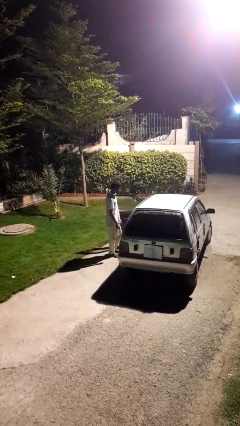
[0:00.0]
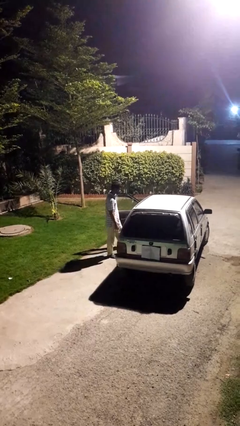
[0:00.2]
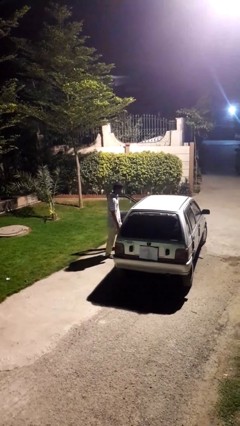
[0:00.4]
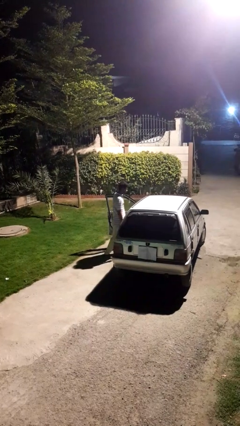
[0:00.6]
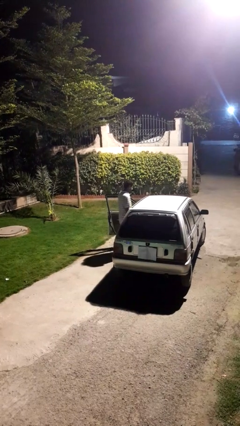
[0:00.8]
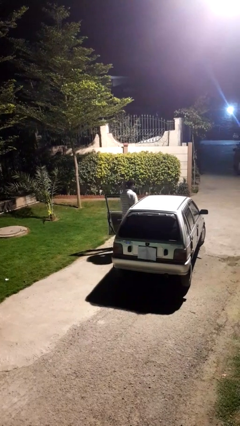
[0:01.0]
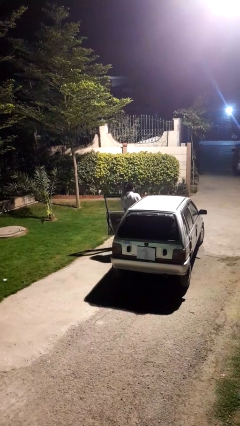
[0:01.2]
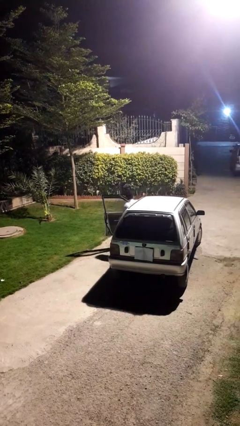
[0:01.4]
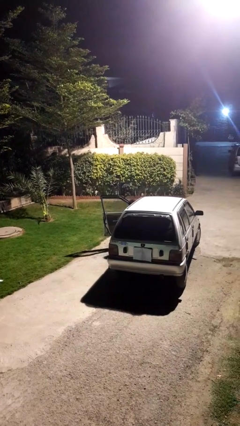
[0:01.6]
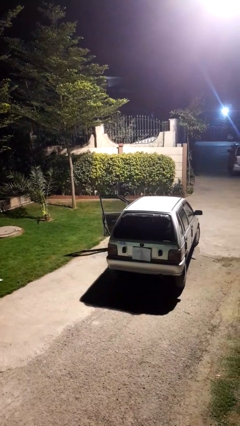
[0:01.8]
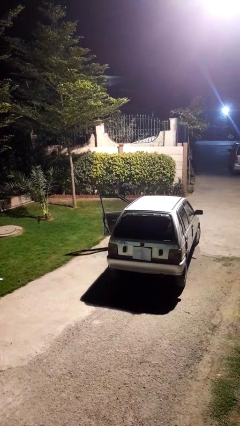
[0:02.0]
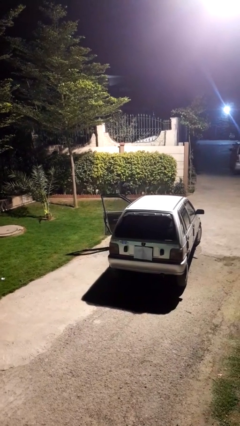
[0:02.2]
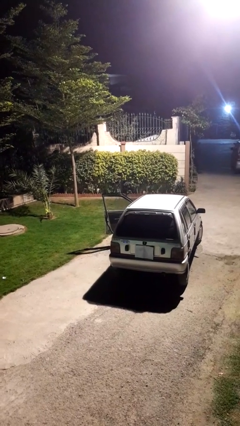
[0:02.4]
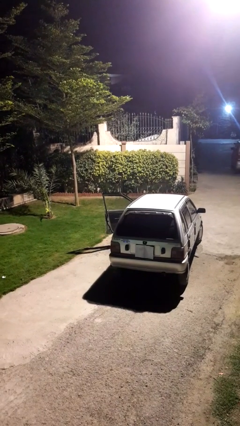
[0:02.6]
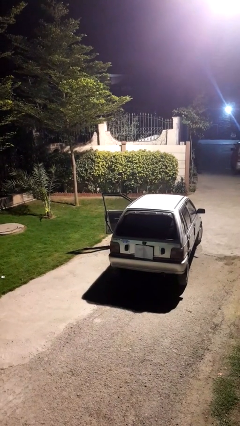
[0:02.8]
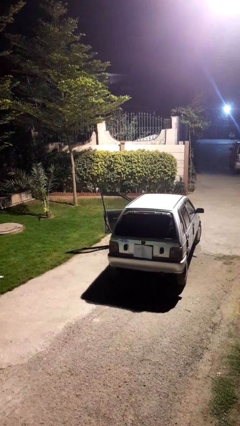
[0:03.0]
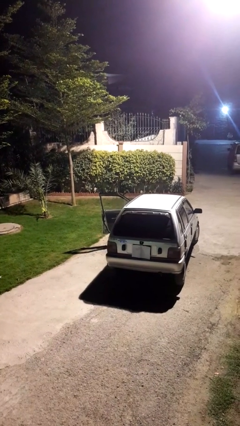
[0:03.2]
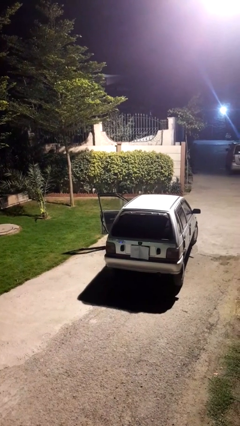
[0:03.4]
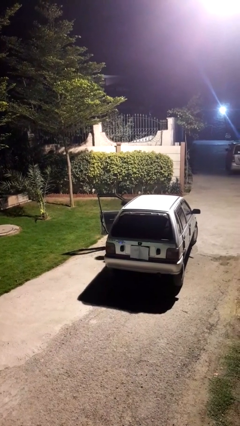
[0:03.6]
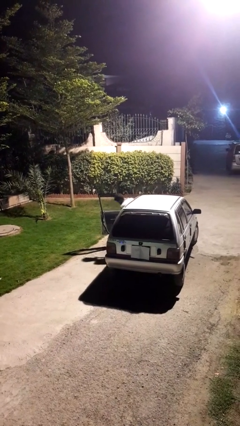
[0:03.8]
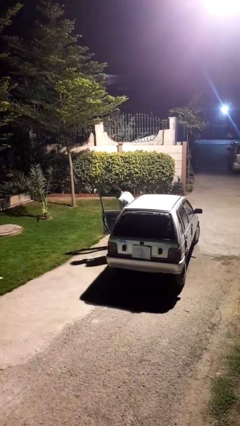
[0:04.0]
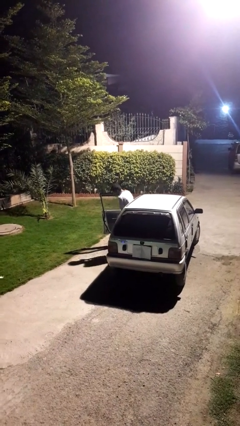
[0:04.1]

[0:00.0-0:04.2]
person enters car

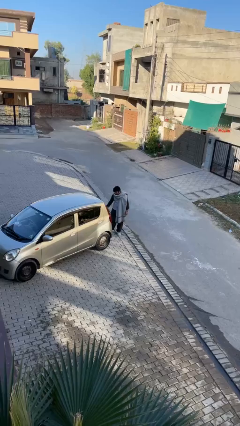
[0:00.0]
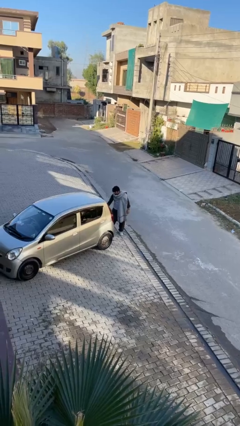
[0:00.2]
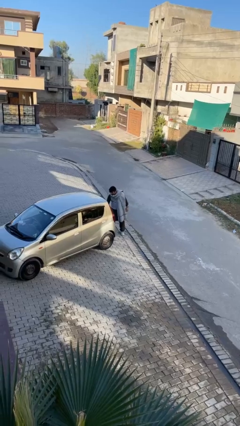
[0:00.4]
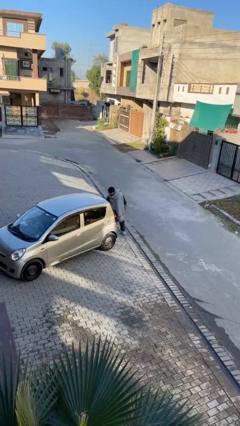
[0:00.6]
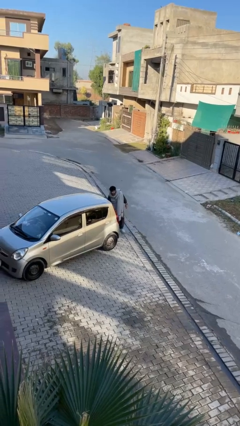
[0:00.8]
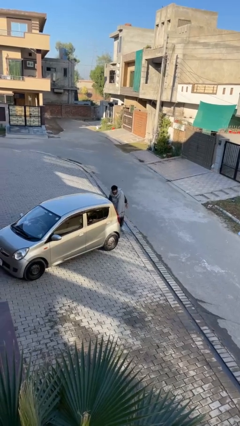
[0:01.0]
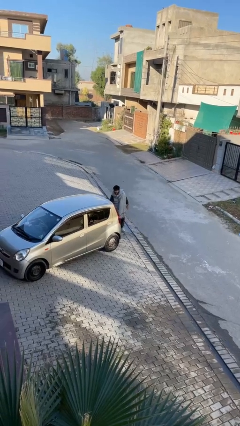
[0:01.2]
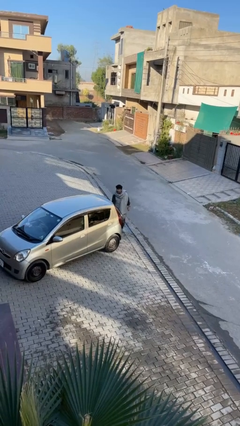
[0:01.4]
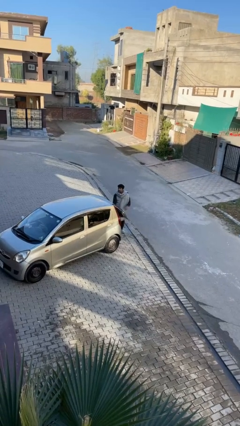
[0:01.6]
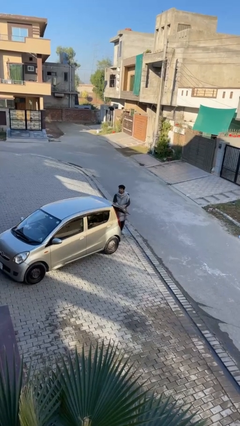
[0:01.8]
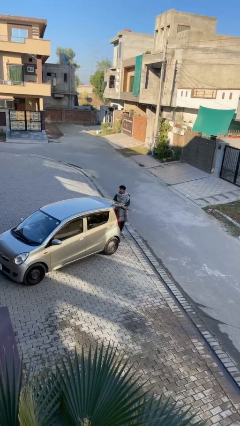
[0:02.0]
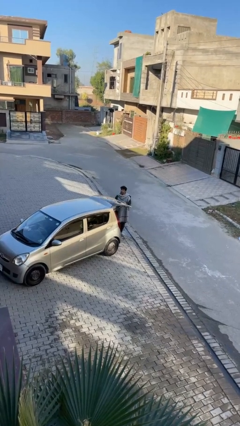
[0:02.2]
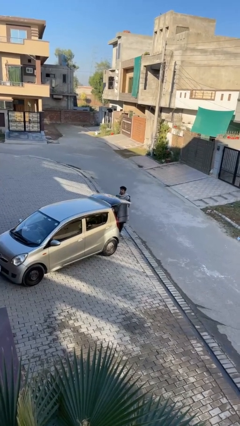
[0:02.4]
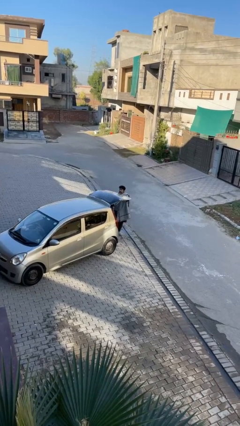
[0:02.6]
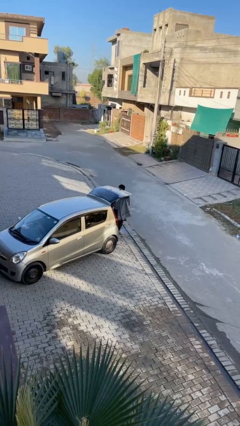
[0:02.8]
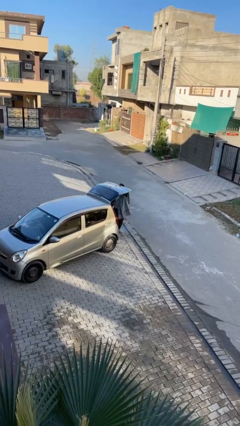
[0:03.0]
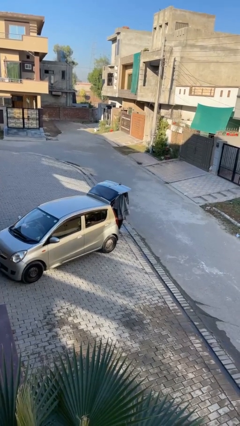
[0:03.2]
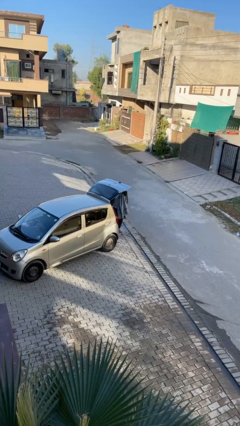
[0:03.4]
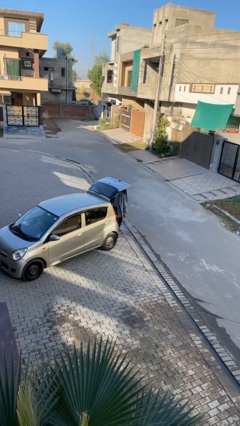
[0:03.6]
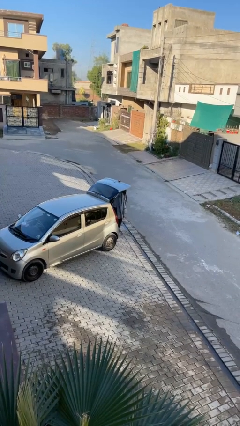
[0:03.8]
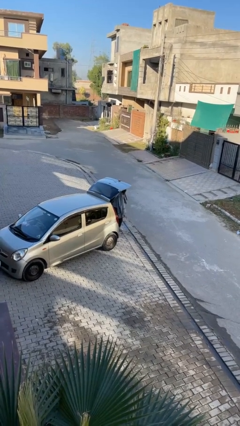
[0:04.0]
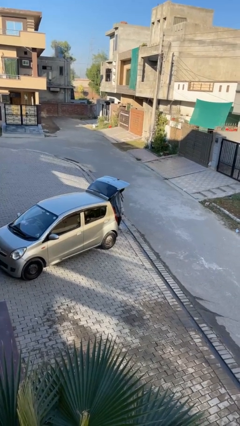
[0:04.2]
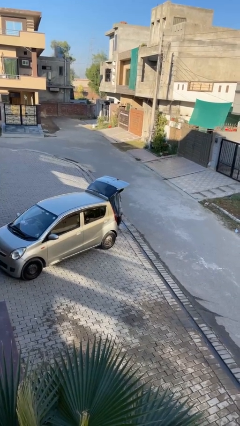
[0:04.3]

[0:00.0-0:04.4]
person opens car trunk

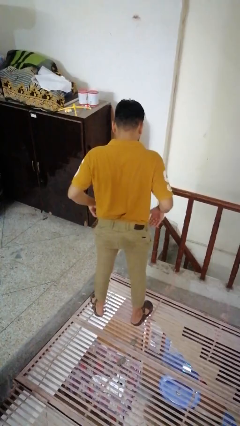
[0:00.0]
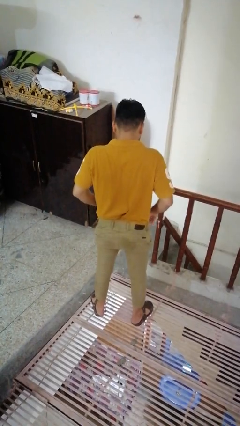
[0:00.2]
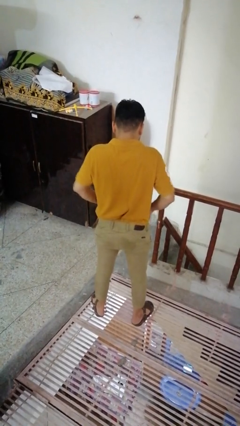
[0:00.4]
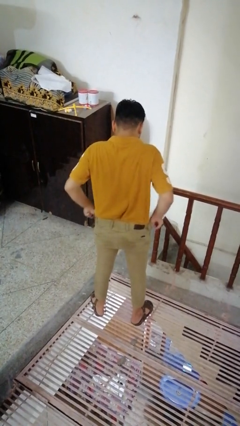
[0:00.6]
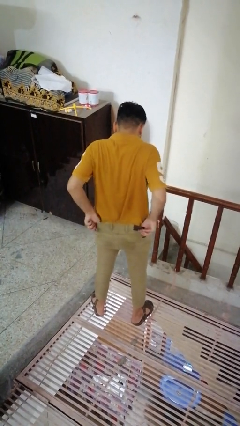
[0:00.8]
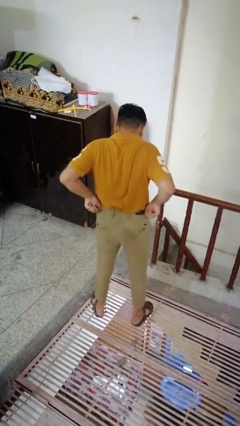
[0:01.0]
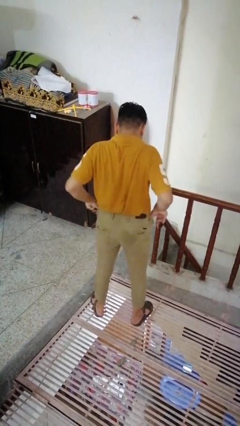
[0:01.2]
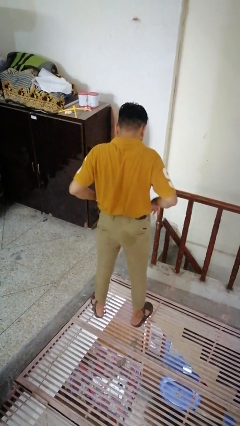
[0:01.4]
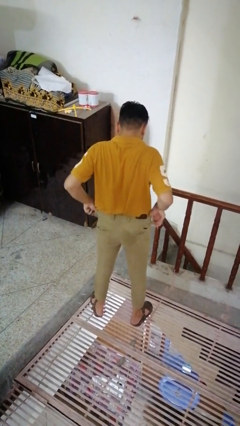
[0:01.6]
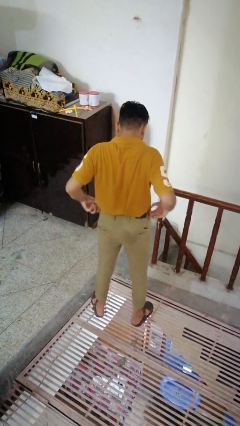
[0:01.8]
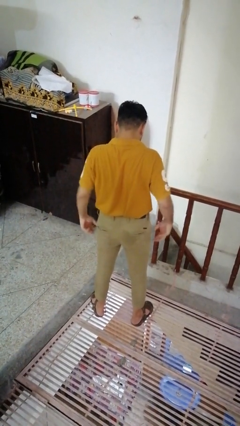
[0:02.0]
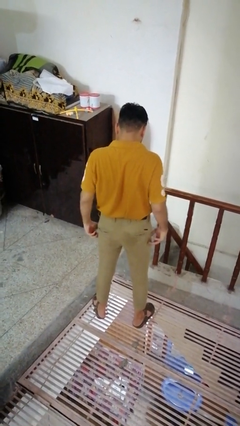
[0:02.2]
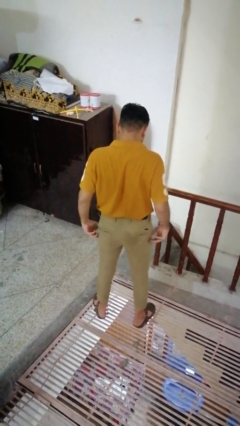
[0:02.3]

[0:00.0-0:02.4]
person hikes up pants

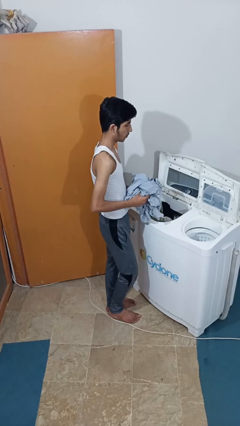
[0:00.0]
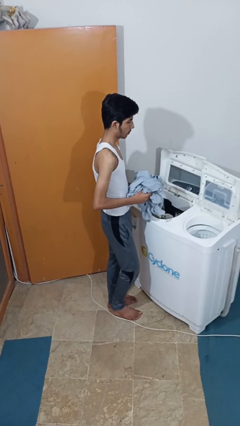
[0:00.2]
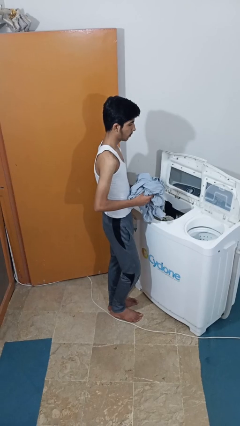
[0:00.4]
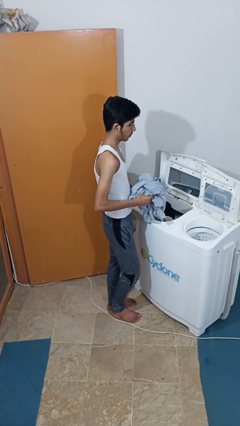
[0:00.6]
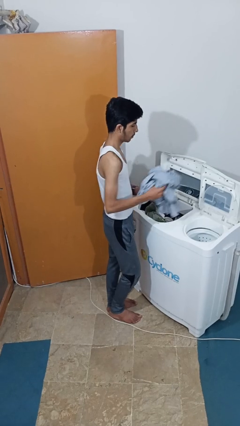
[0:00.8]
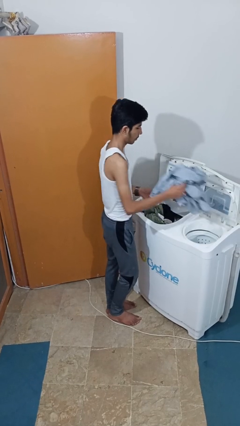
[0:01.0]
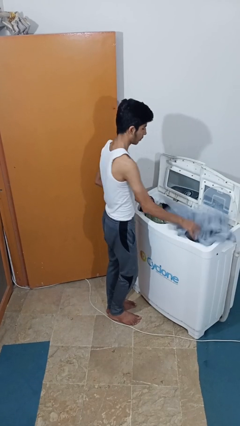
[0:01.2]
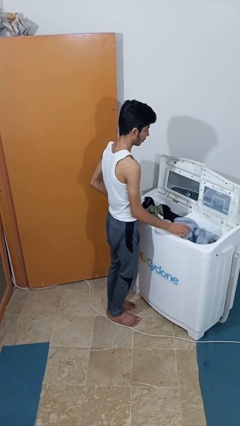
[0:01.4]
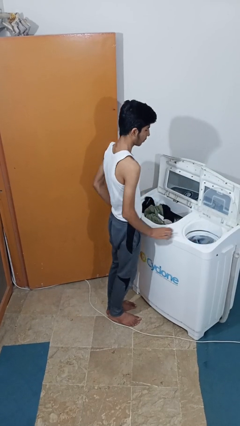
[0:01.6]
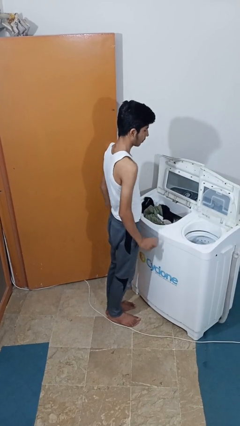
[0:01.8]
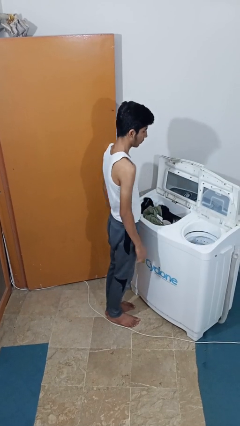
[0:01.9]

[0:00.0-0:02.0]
person loads dryer

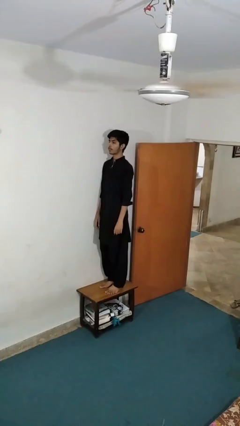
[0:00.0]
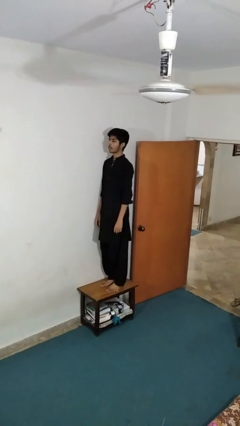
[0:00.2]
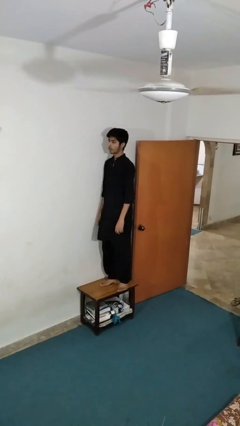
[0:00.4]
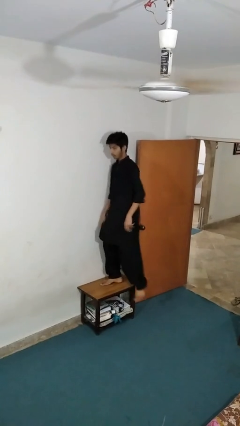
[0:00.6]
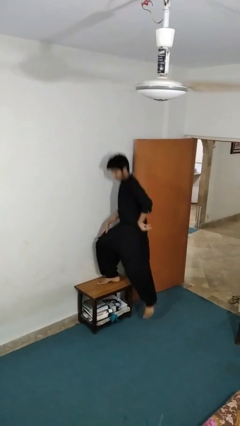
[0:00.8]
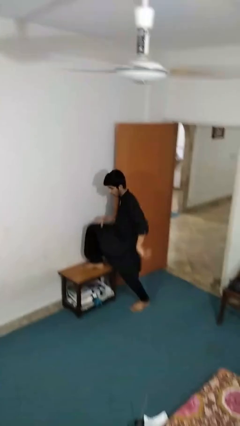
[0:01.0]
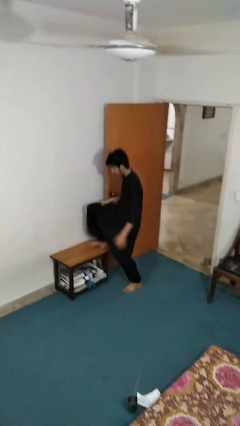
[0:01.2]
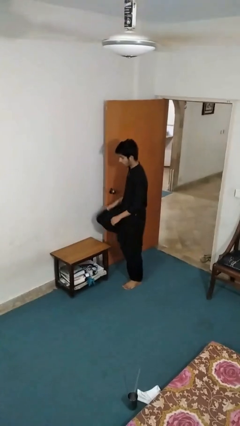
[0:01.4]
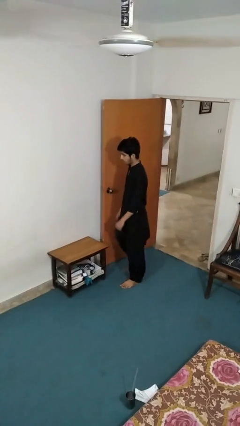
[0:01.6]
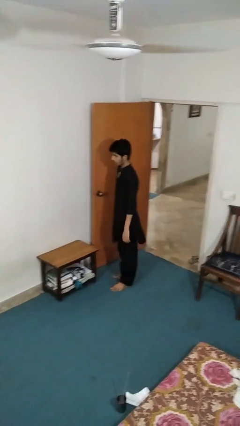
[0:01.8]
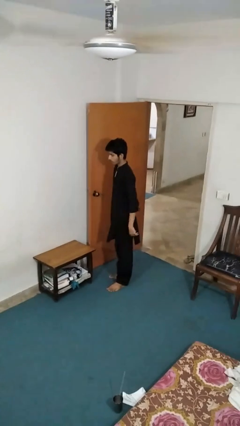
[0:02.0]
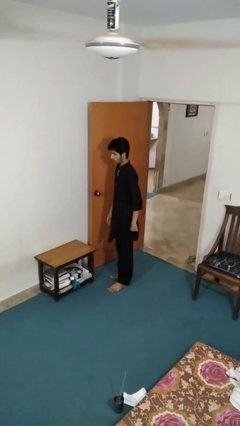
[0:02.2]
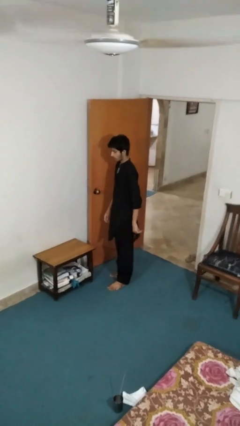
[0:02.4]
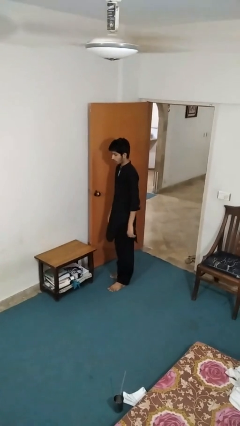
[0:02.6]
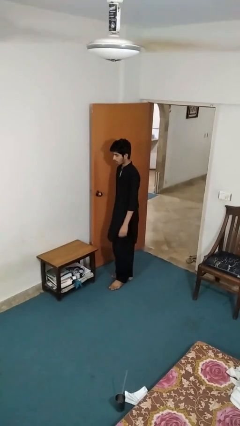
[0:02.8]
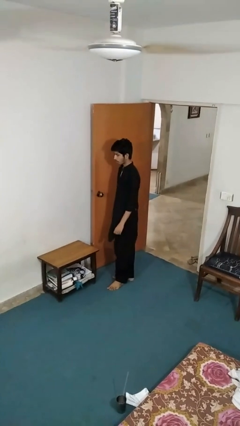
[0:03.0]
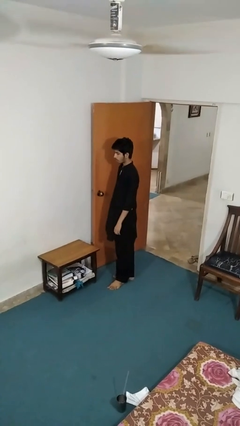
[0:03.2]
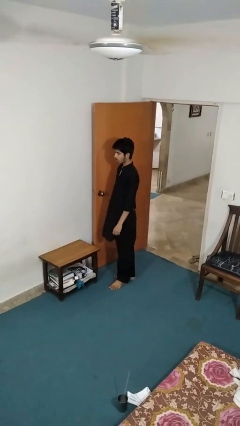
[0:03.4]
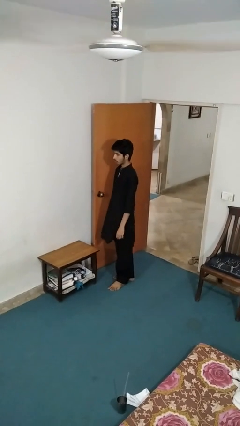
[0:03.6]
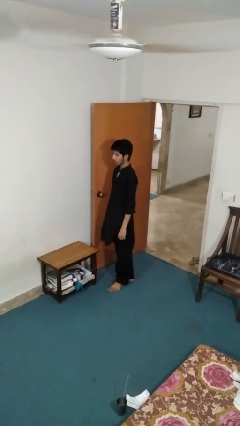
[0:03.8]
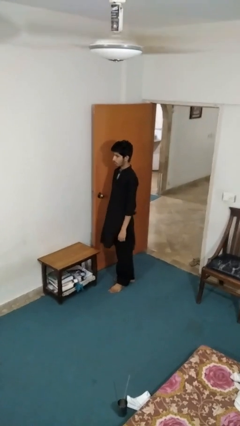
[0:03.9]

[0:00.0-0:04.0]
person climbs off table

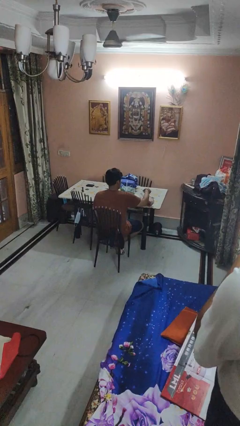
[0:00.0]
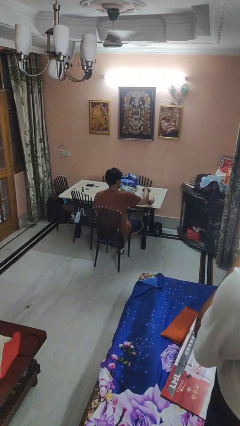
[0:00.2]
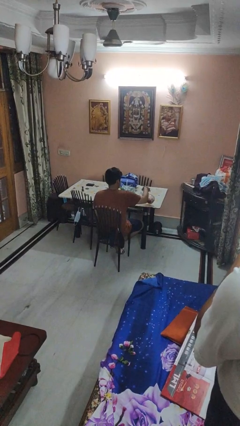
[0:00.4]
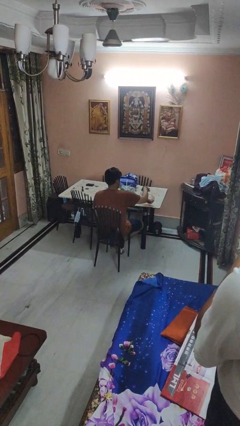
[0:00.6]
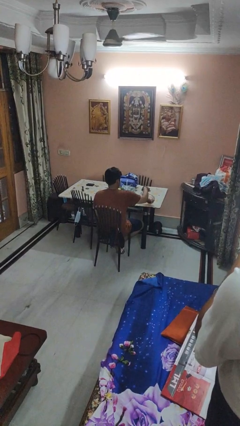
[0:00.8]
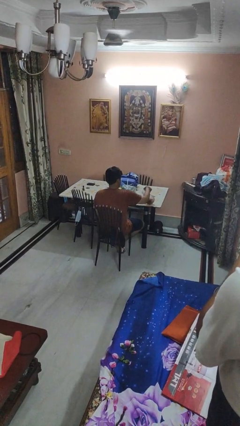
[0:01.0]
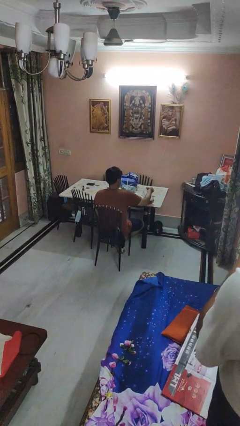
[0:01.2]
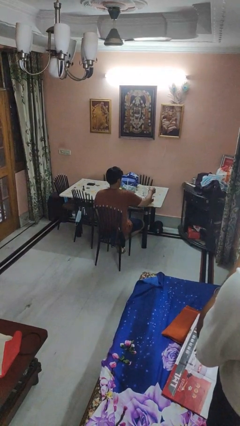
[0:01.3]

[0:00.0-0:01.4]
person pours coffee into mug
